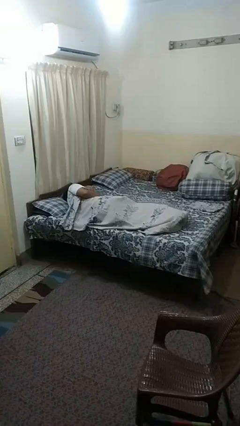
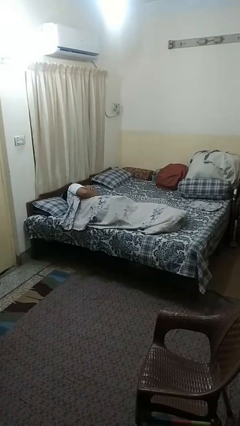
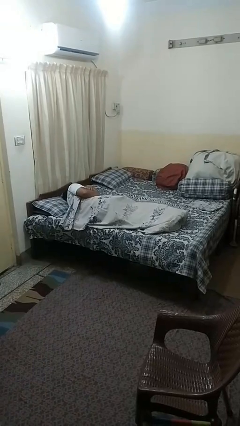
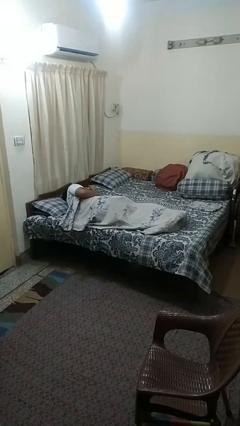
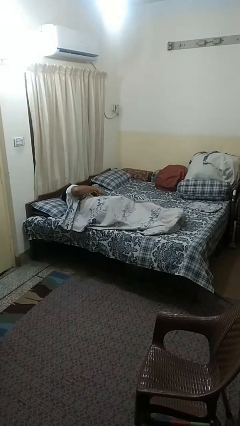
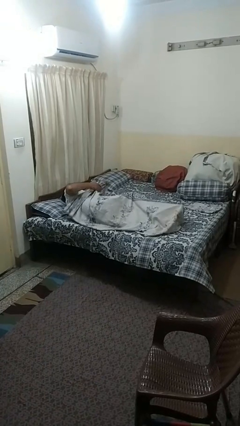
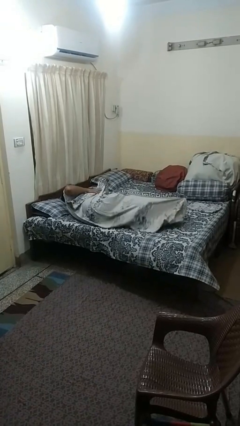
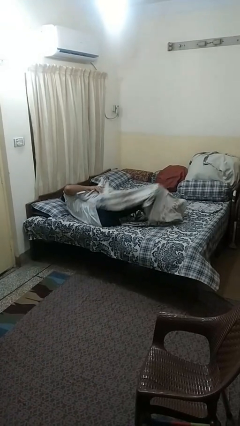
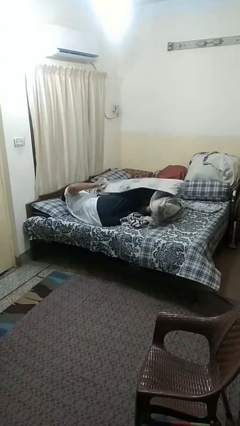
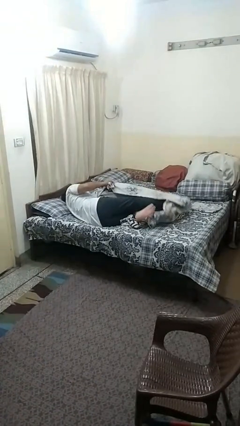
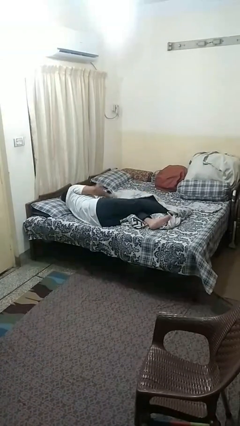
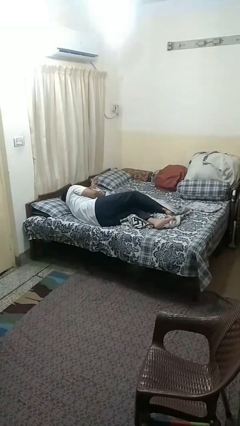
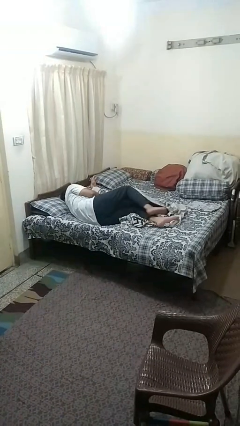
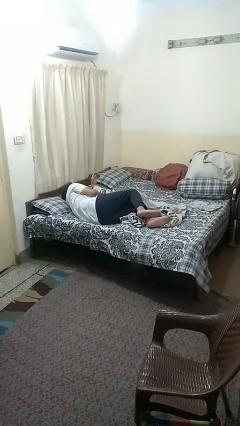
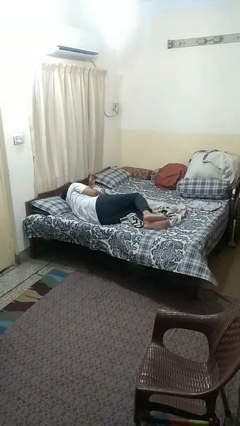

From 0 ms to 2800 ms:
person uncovers with bedsheets

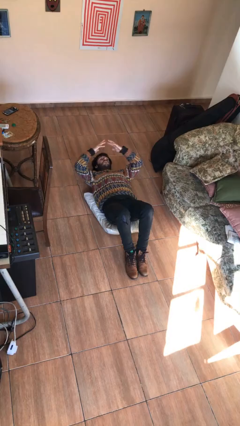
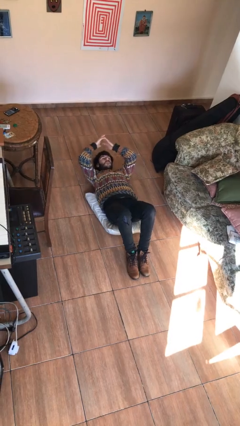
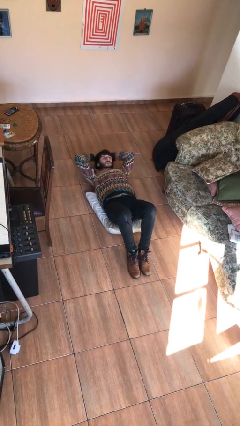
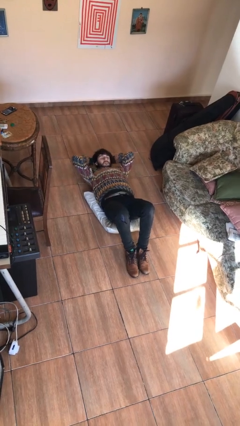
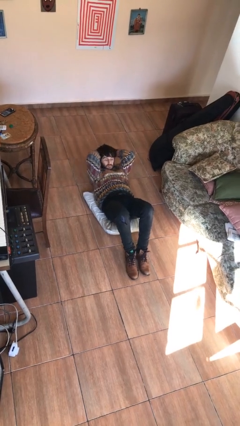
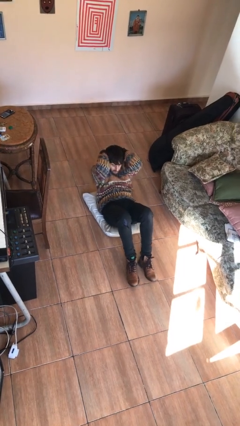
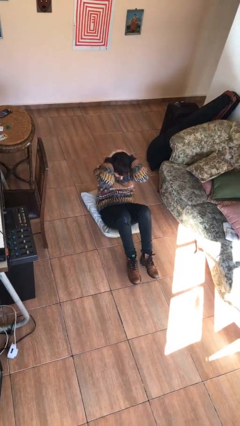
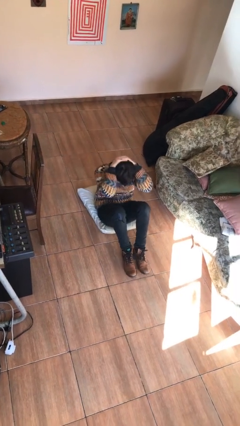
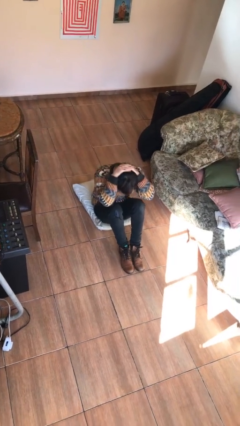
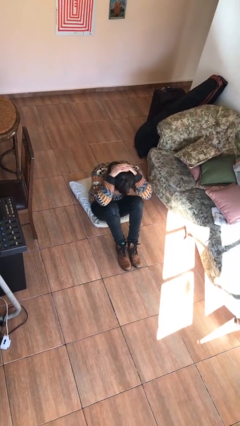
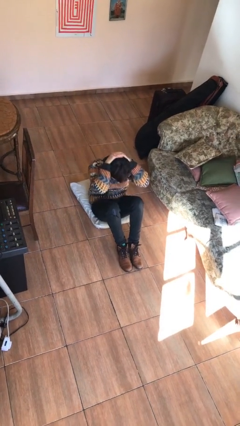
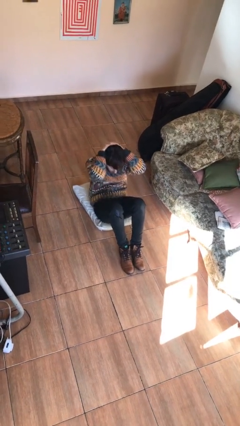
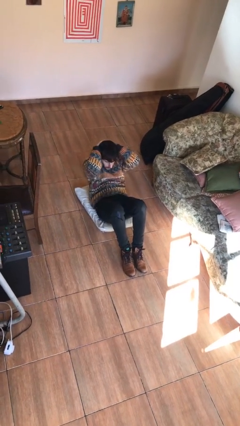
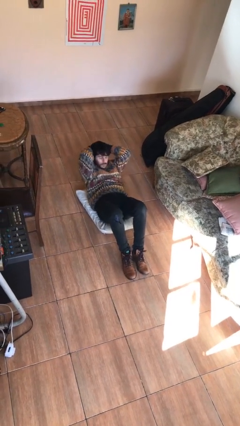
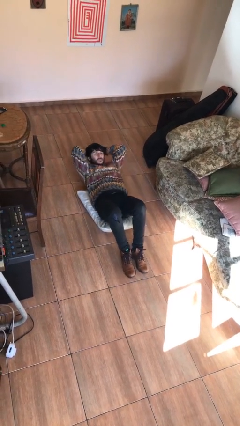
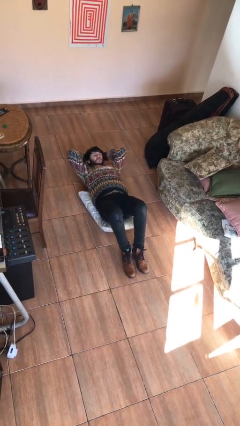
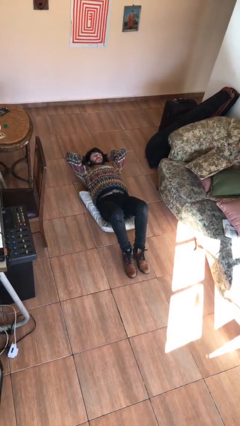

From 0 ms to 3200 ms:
person exercises with situp

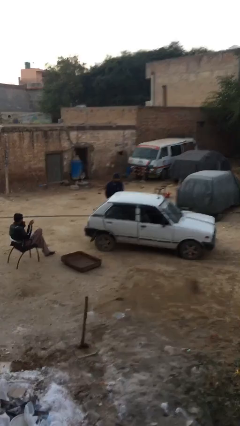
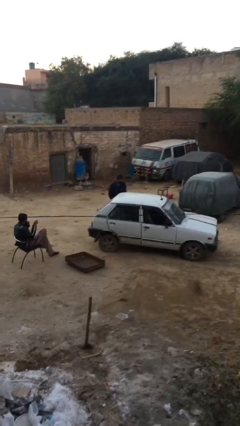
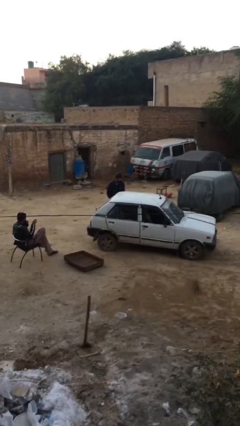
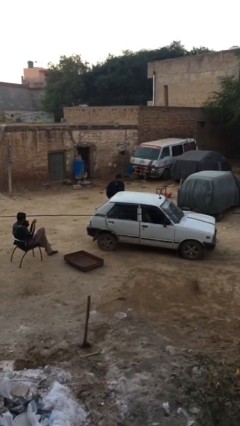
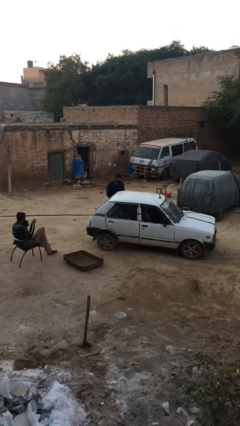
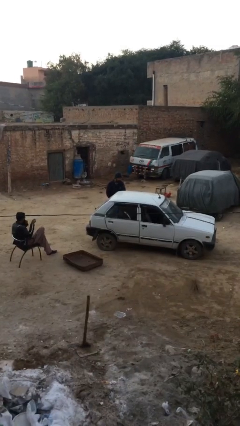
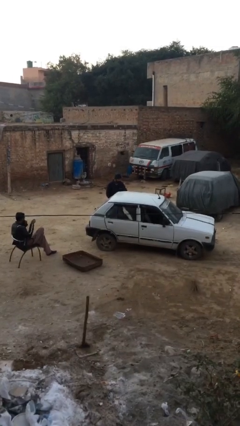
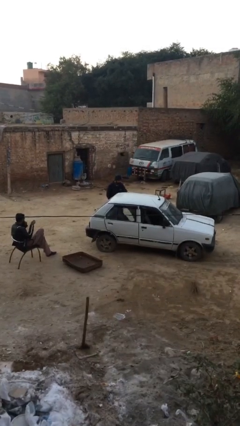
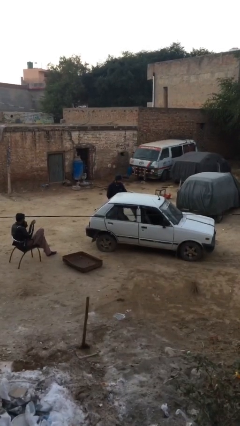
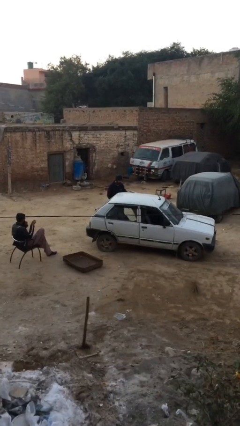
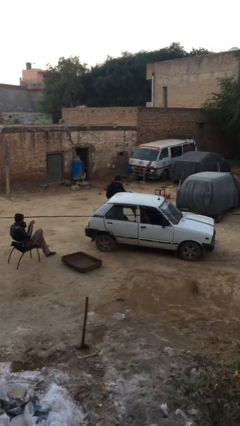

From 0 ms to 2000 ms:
person opens car door

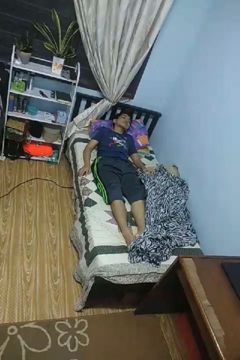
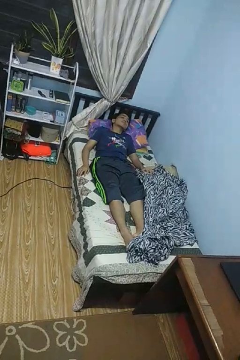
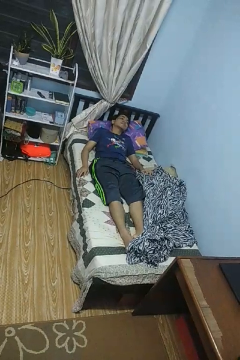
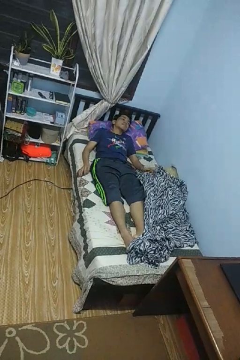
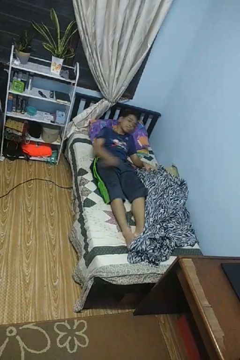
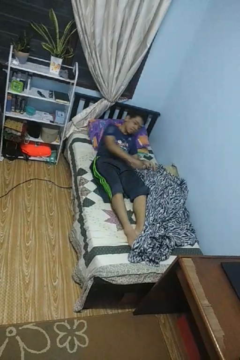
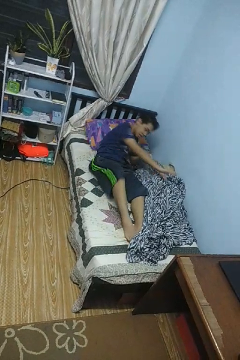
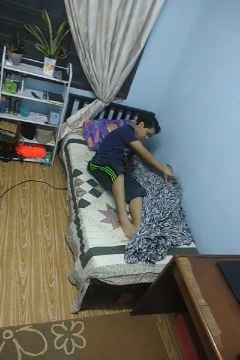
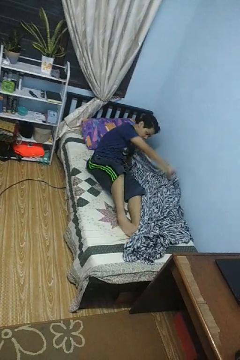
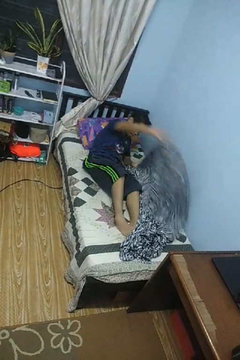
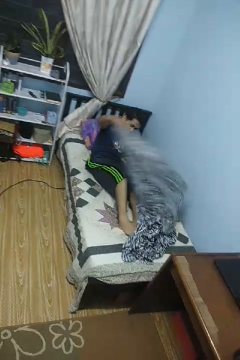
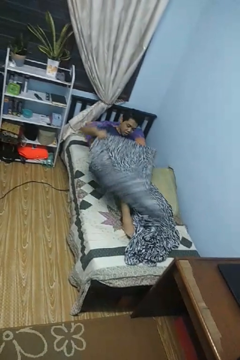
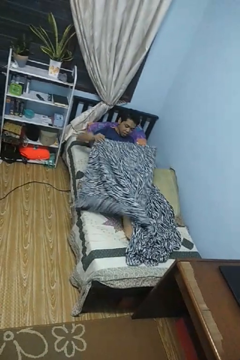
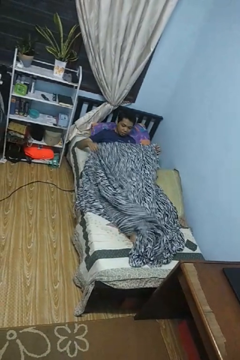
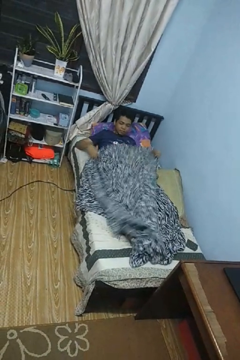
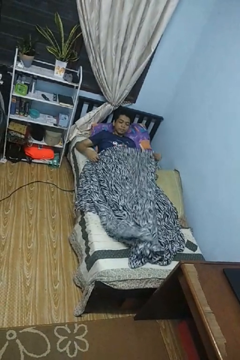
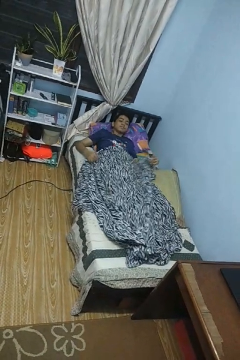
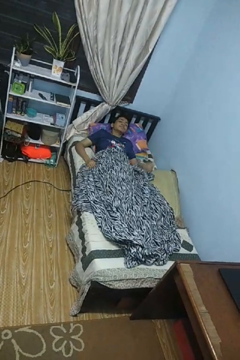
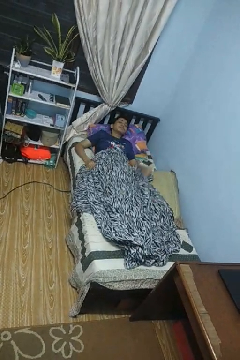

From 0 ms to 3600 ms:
person covers with blanket

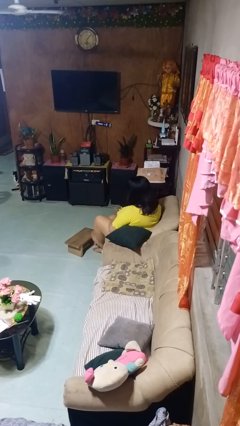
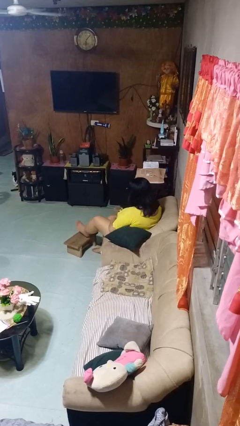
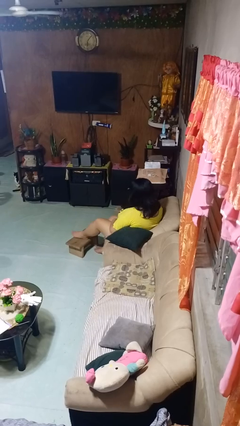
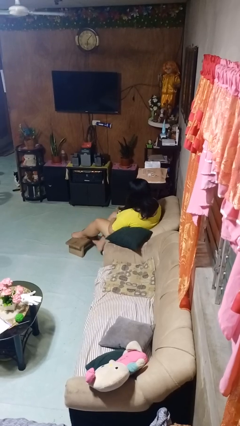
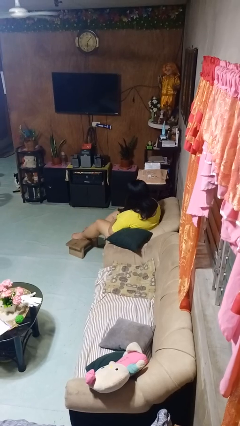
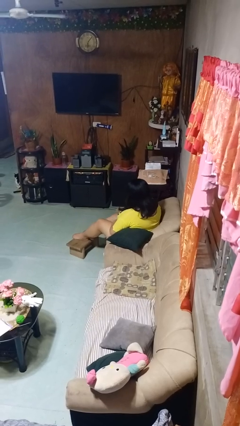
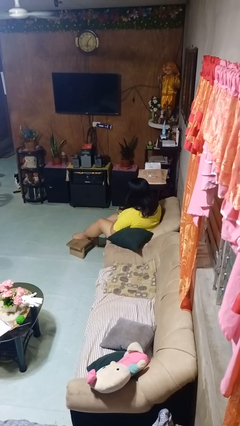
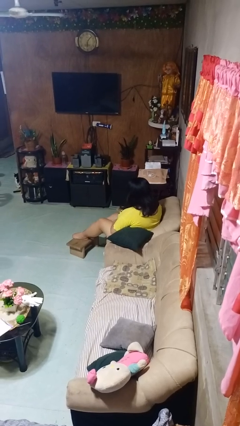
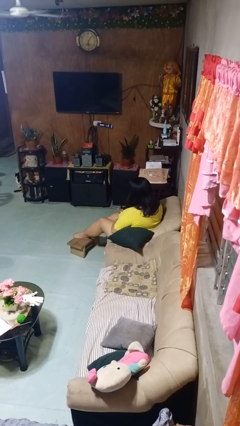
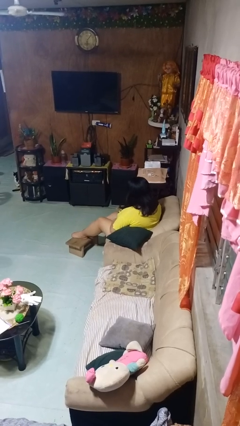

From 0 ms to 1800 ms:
person puts feet up

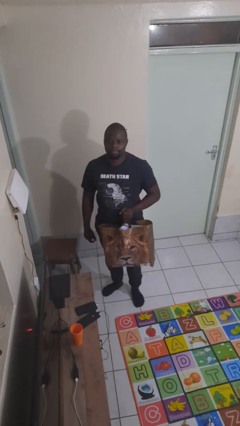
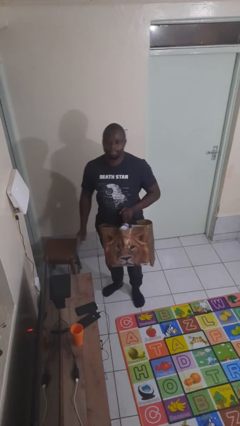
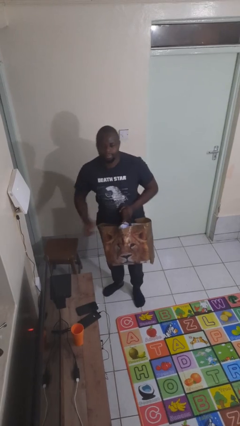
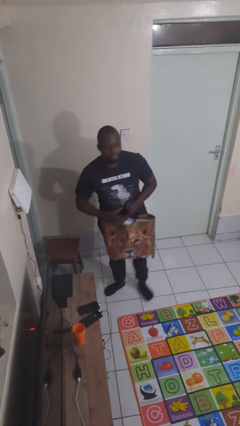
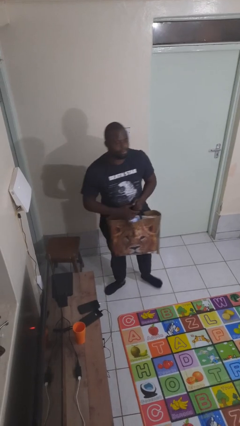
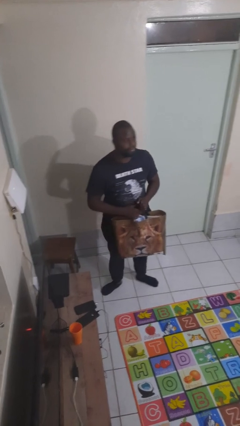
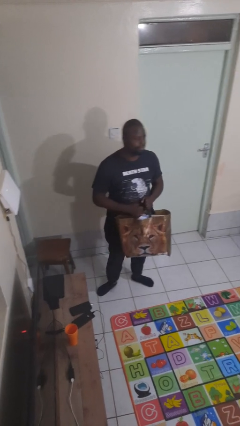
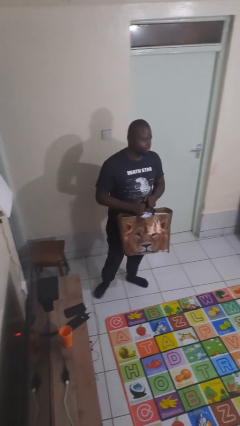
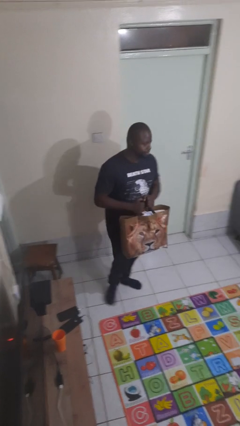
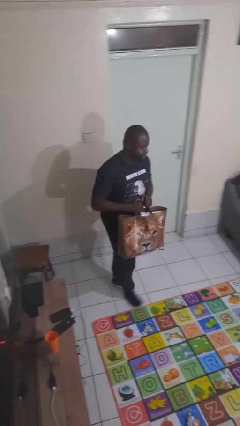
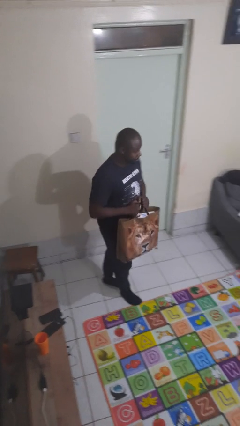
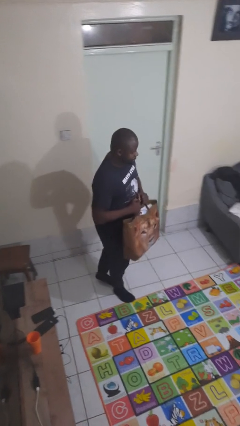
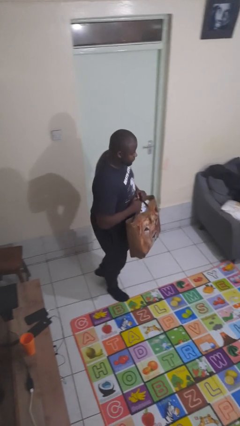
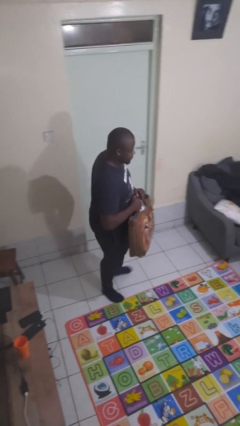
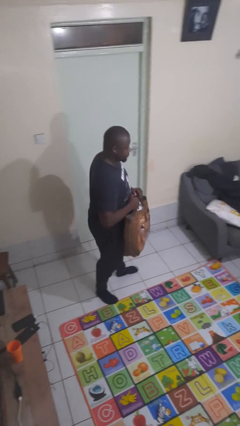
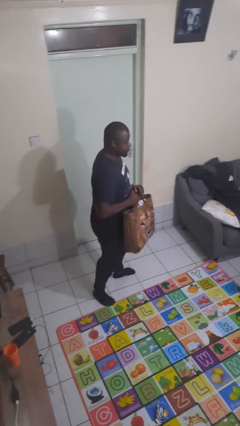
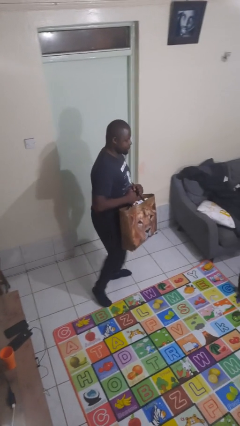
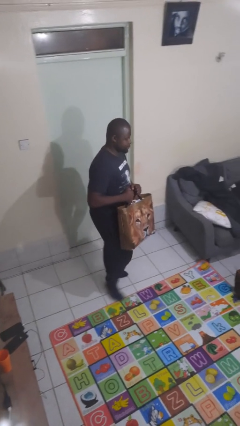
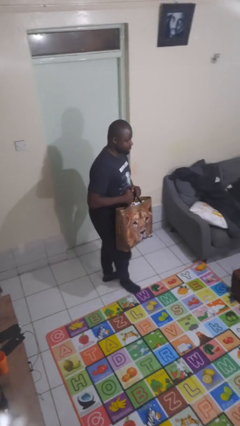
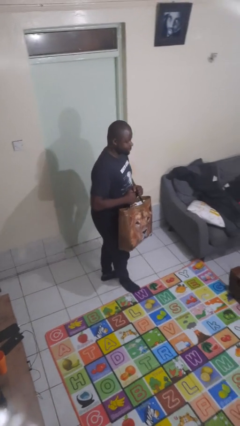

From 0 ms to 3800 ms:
person carries groceries

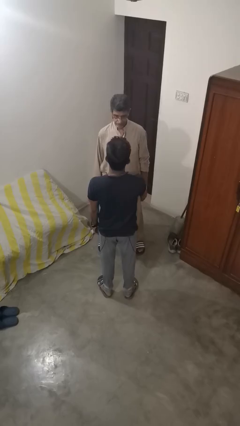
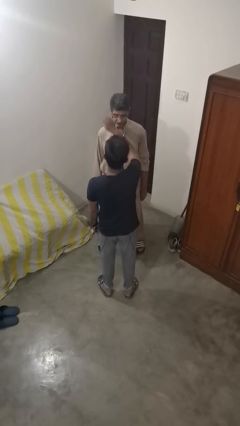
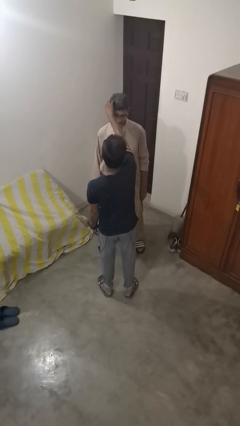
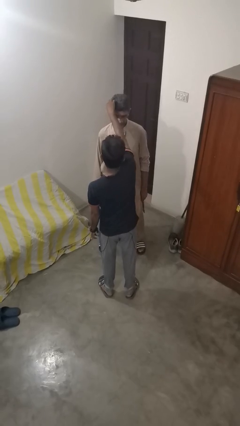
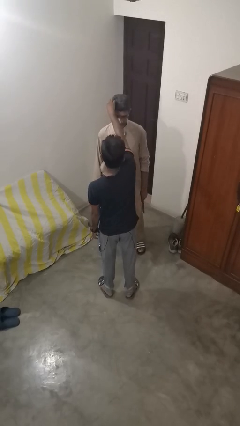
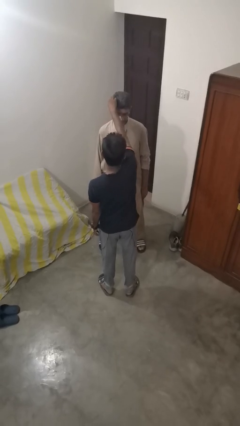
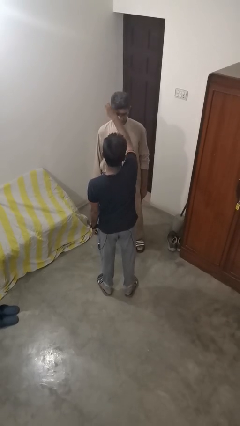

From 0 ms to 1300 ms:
person grabs person by hair
